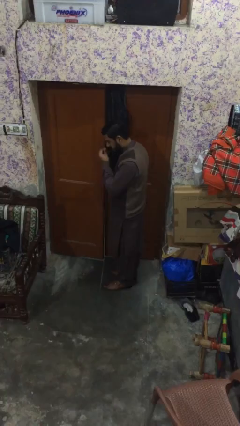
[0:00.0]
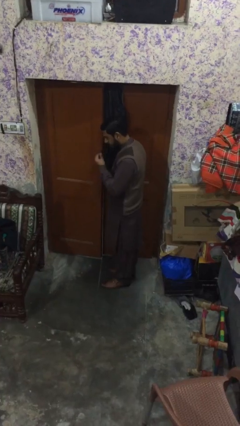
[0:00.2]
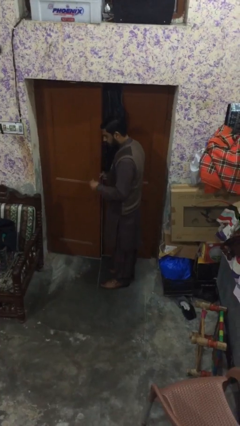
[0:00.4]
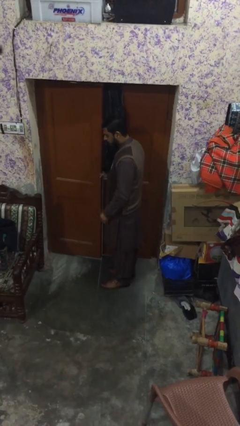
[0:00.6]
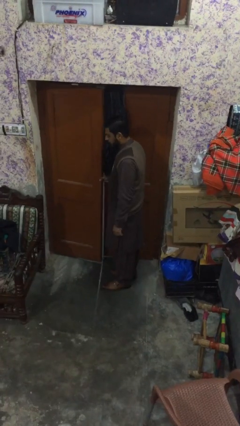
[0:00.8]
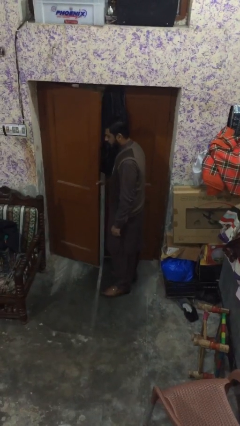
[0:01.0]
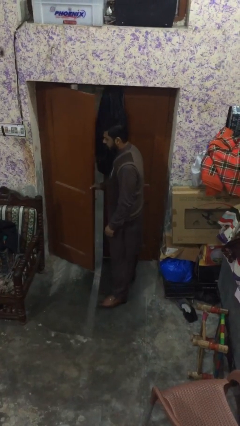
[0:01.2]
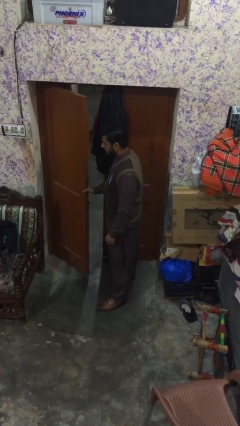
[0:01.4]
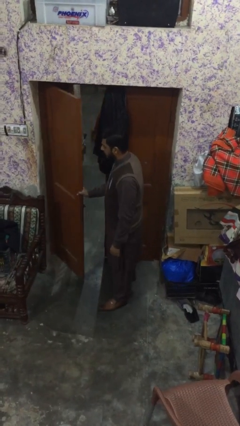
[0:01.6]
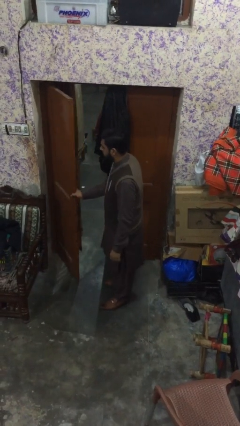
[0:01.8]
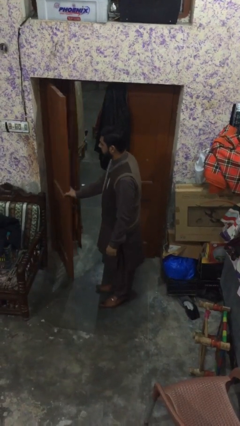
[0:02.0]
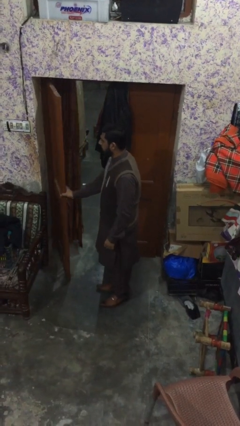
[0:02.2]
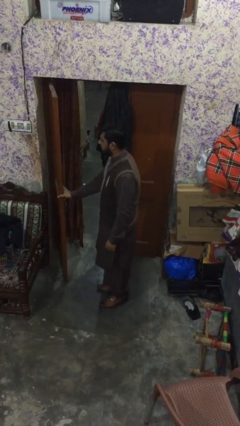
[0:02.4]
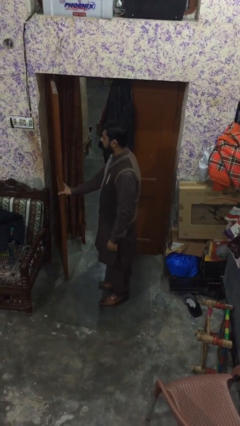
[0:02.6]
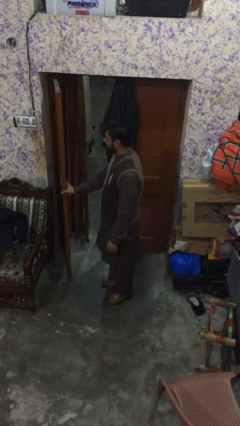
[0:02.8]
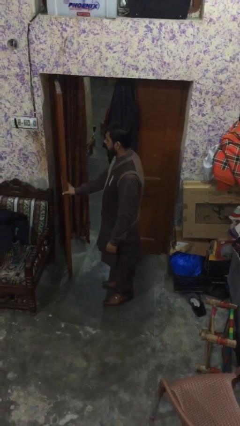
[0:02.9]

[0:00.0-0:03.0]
person opens facility door

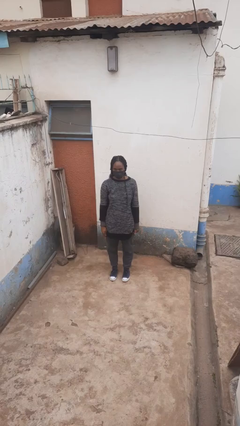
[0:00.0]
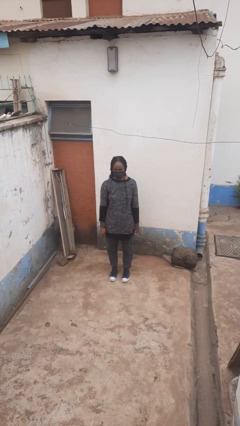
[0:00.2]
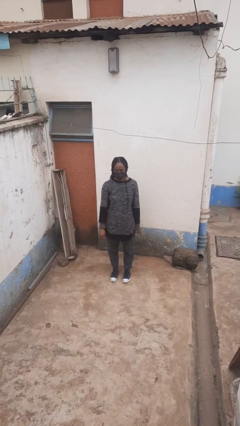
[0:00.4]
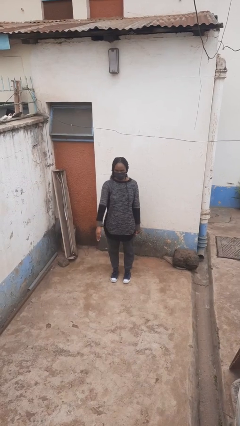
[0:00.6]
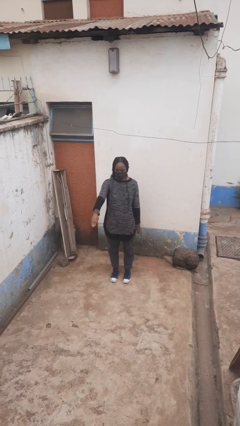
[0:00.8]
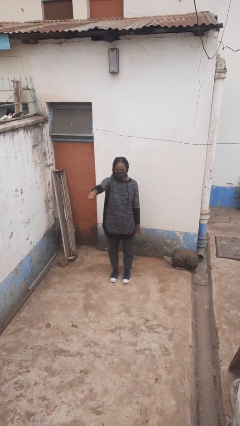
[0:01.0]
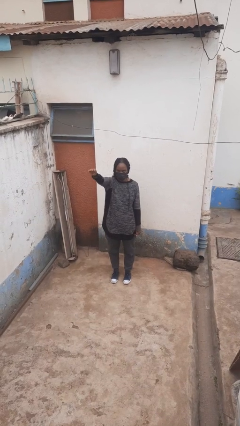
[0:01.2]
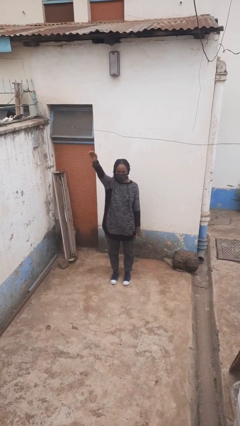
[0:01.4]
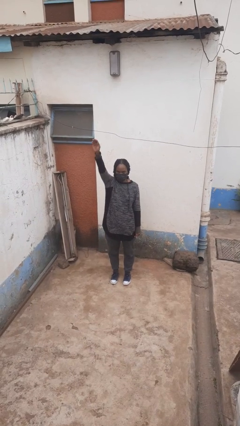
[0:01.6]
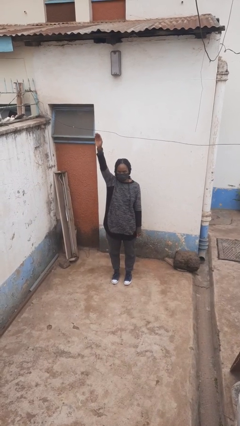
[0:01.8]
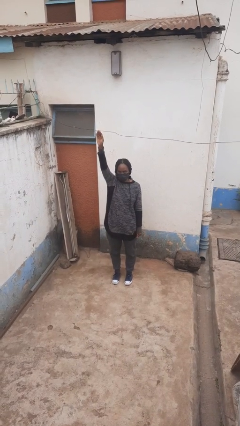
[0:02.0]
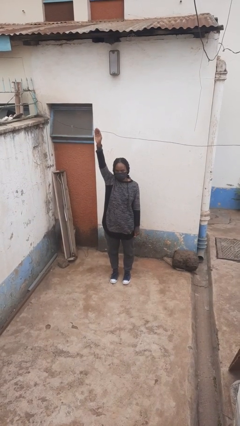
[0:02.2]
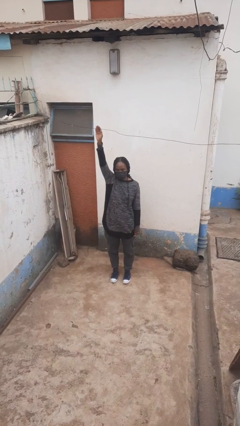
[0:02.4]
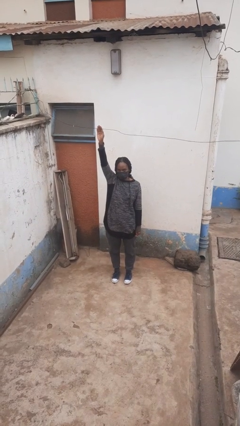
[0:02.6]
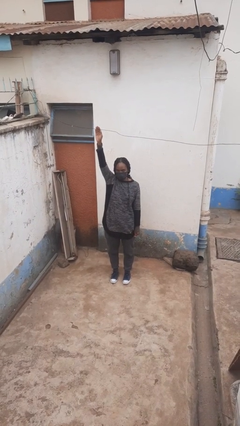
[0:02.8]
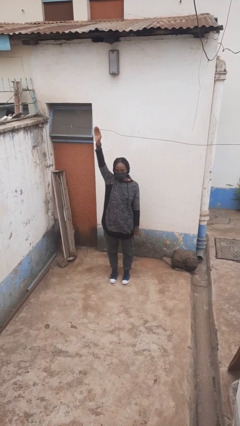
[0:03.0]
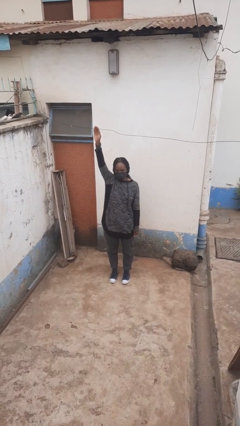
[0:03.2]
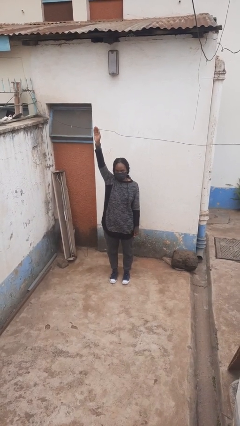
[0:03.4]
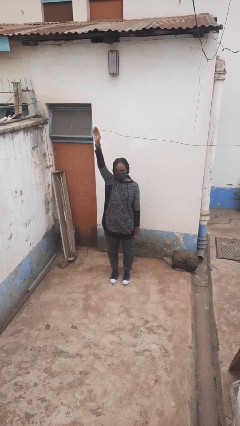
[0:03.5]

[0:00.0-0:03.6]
person gestures raise hand

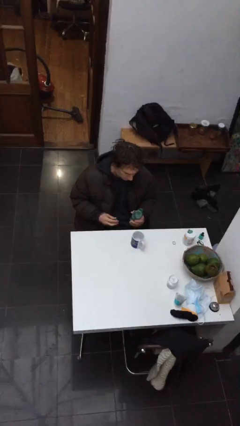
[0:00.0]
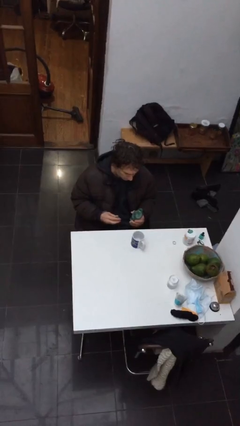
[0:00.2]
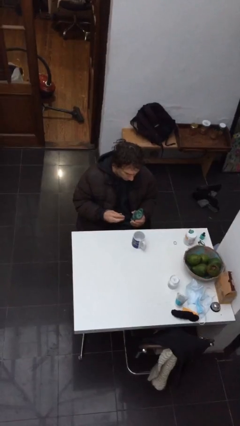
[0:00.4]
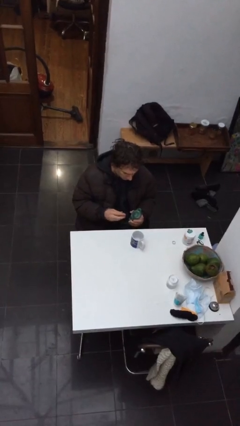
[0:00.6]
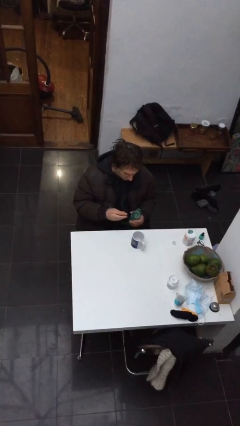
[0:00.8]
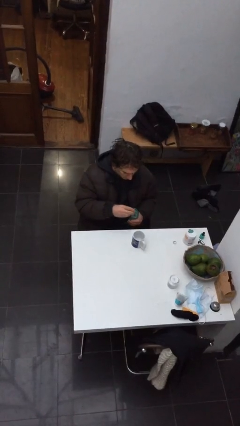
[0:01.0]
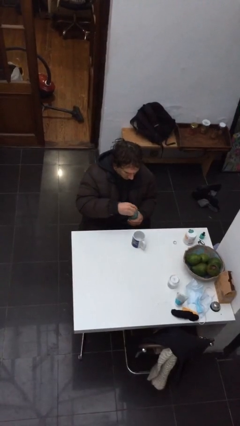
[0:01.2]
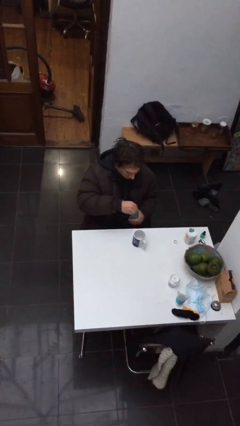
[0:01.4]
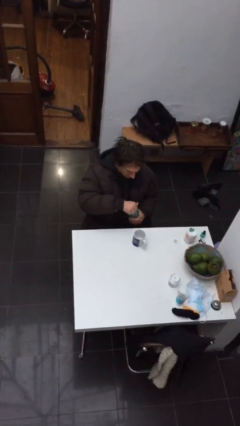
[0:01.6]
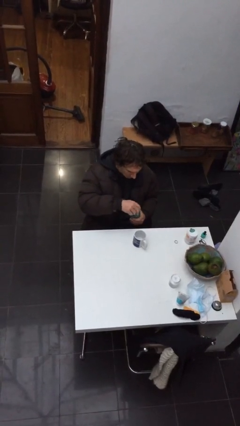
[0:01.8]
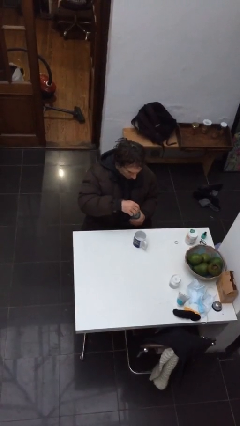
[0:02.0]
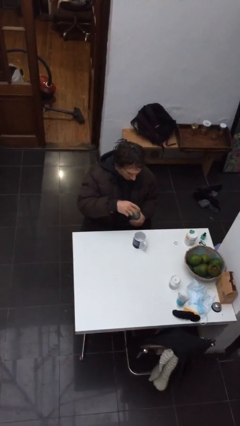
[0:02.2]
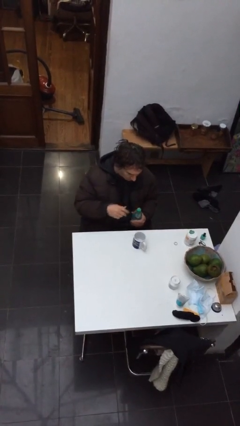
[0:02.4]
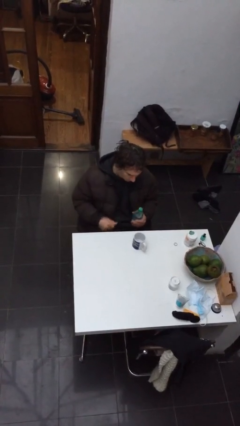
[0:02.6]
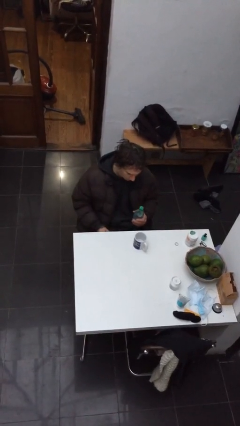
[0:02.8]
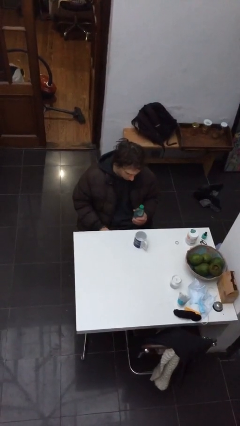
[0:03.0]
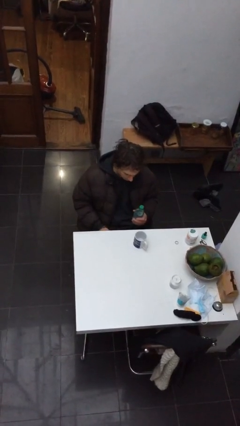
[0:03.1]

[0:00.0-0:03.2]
person screws lid to bottle

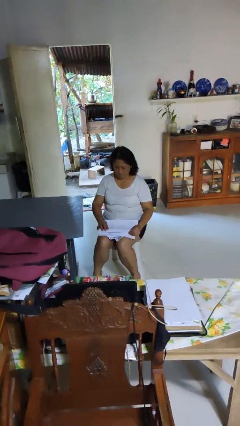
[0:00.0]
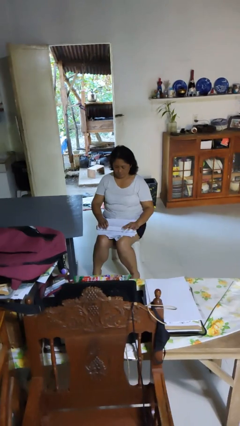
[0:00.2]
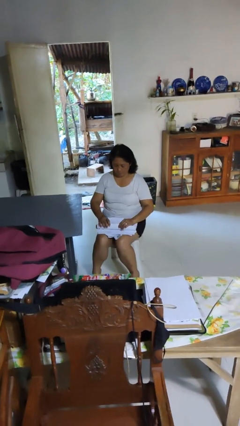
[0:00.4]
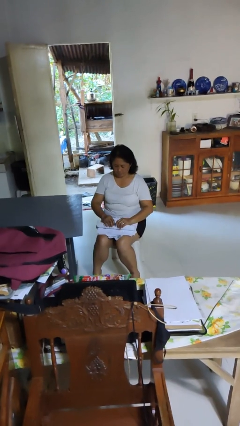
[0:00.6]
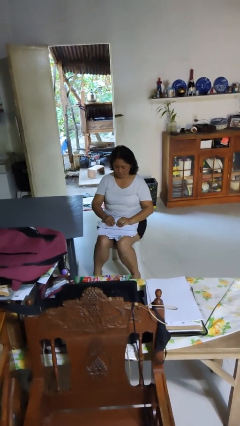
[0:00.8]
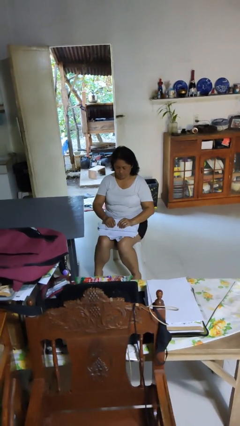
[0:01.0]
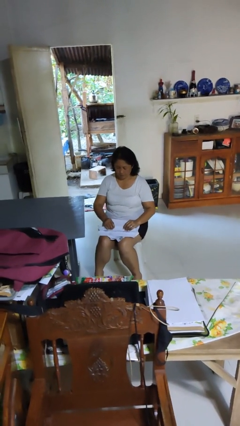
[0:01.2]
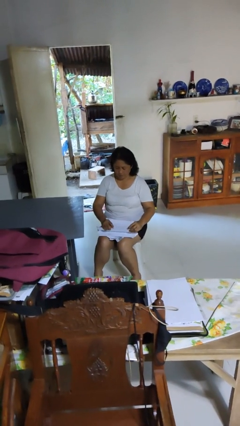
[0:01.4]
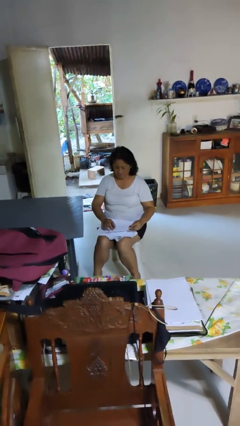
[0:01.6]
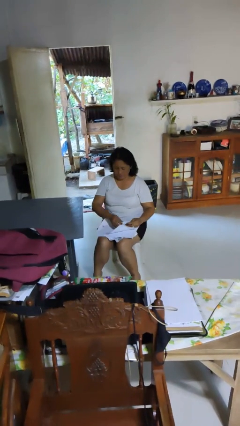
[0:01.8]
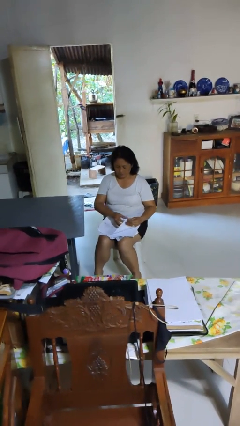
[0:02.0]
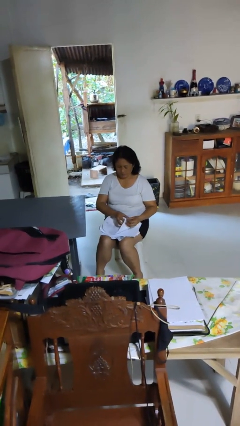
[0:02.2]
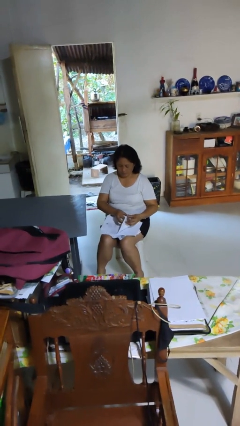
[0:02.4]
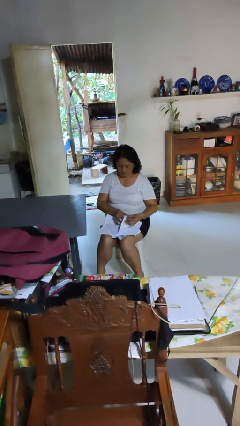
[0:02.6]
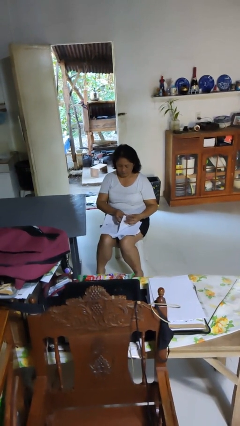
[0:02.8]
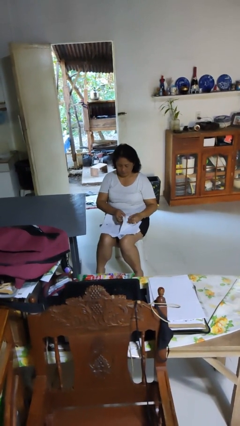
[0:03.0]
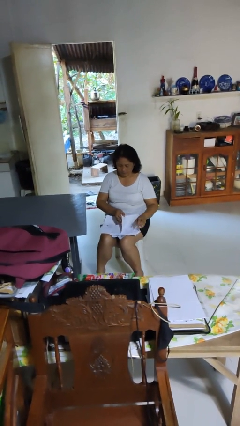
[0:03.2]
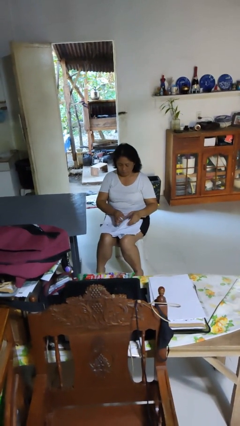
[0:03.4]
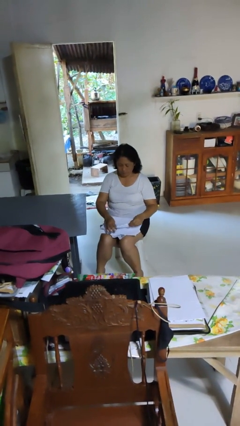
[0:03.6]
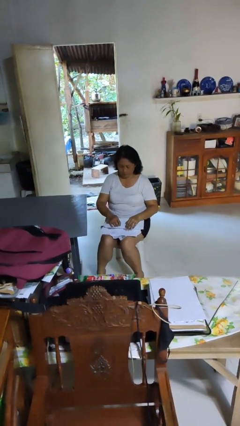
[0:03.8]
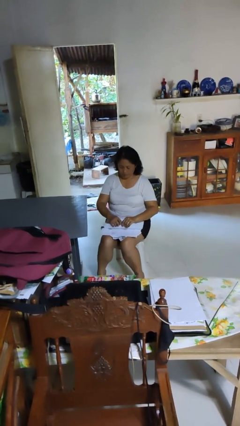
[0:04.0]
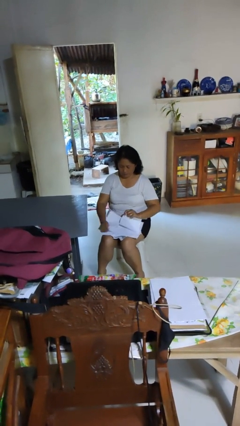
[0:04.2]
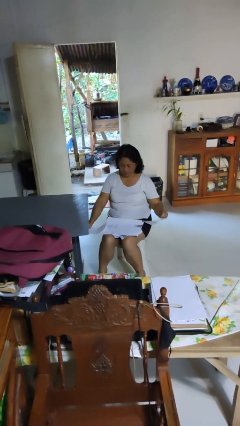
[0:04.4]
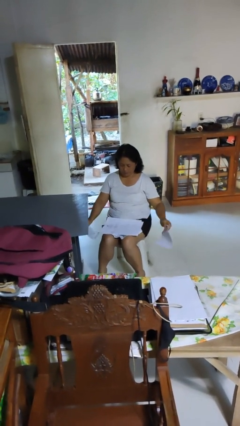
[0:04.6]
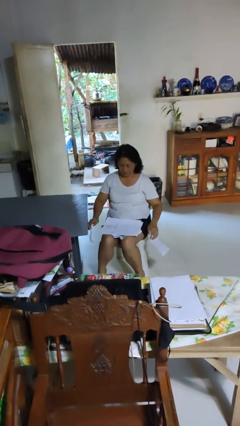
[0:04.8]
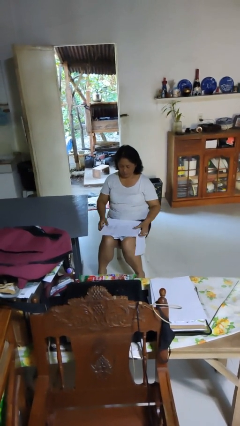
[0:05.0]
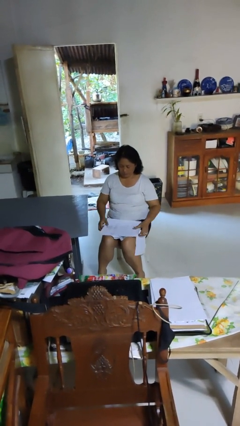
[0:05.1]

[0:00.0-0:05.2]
person tears paper

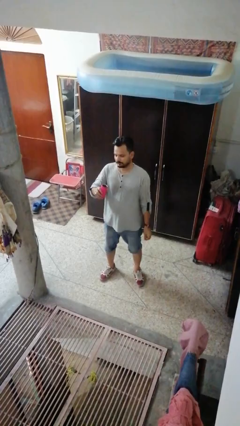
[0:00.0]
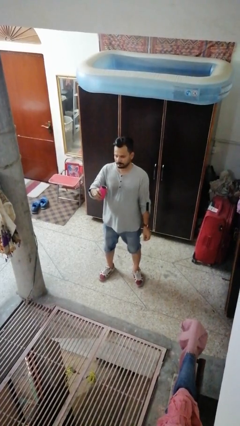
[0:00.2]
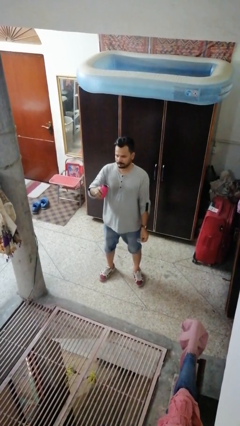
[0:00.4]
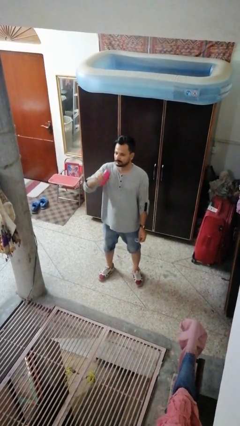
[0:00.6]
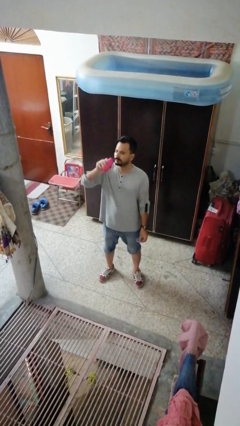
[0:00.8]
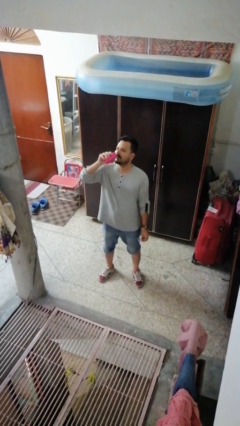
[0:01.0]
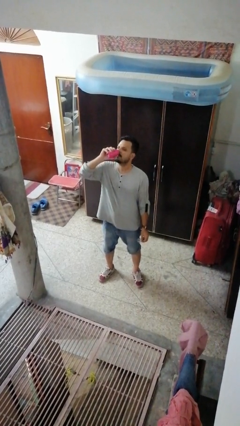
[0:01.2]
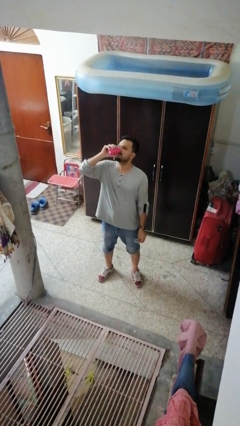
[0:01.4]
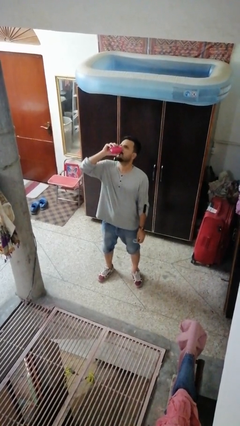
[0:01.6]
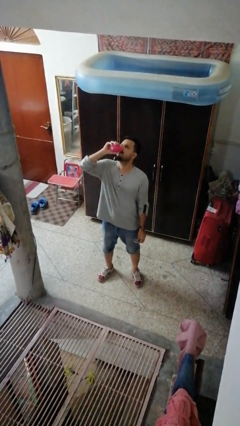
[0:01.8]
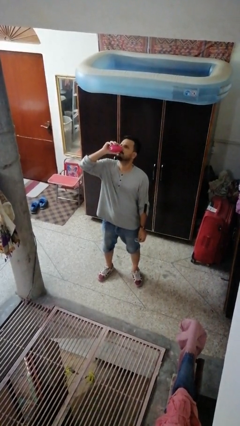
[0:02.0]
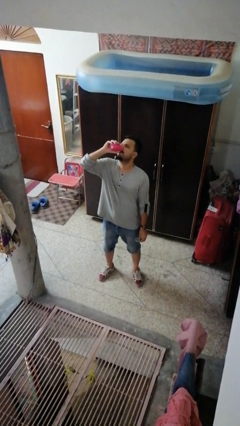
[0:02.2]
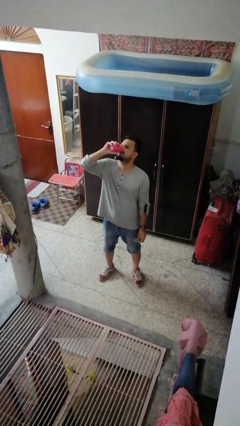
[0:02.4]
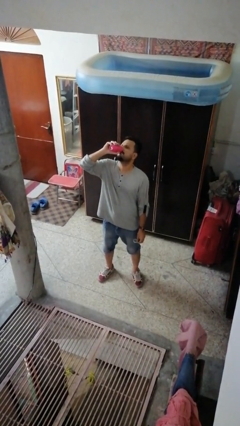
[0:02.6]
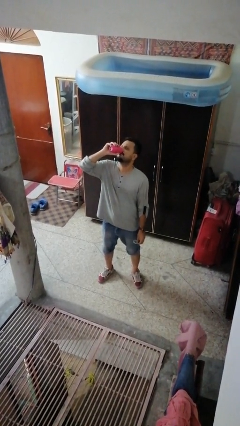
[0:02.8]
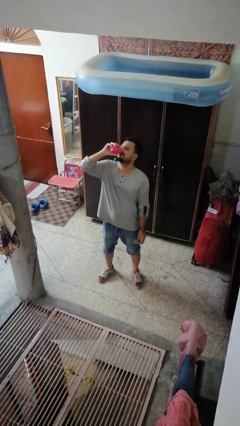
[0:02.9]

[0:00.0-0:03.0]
person drinks from beverage can
